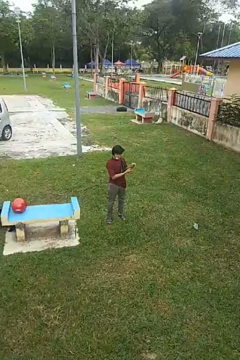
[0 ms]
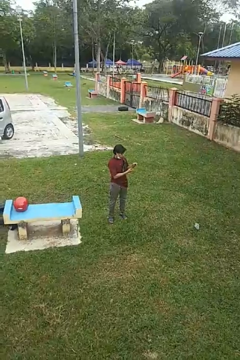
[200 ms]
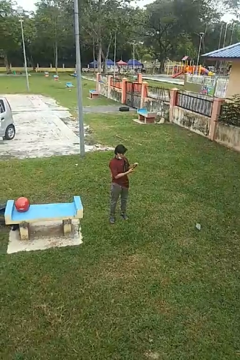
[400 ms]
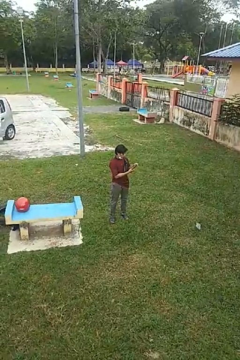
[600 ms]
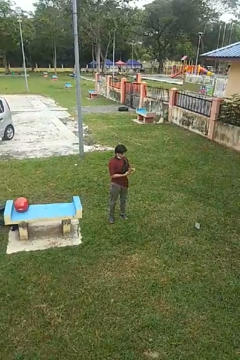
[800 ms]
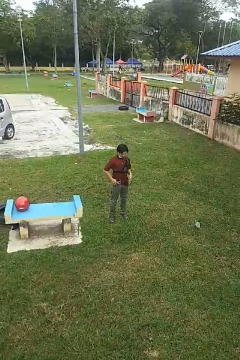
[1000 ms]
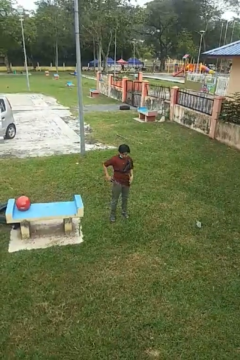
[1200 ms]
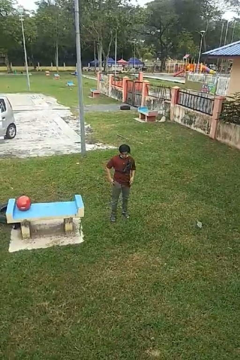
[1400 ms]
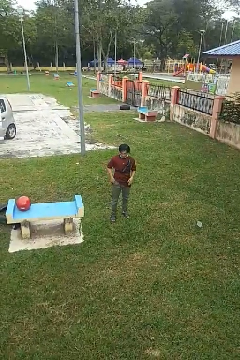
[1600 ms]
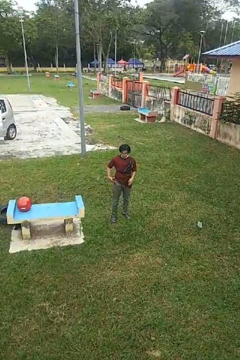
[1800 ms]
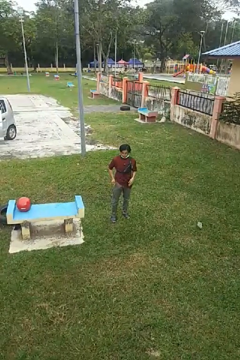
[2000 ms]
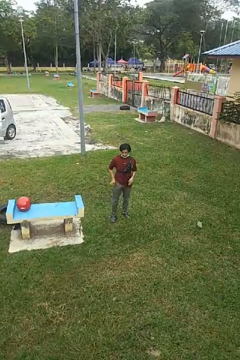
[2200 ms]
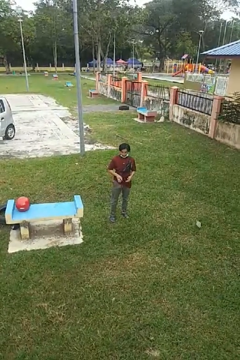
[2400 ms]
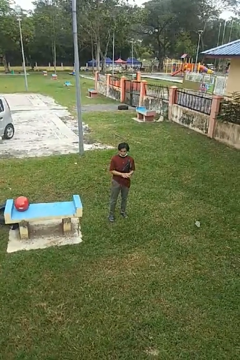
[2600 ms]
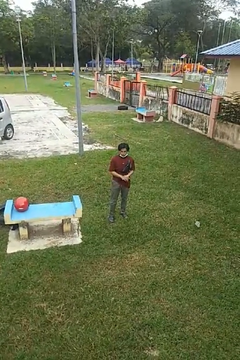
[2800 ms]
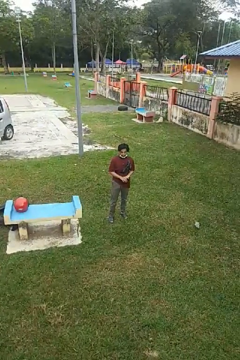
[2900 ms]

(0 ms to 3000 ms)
person puts phone into pocket

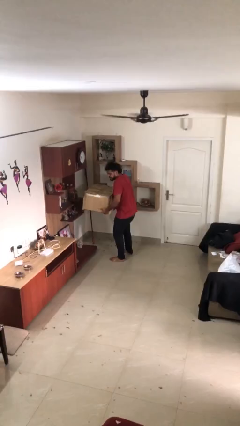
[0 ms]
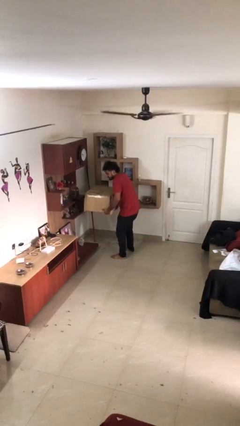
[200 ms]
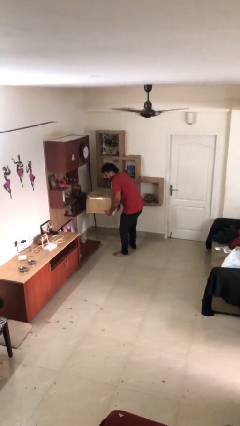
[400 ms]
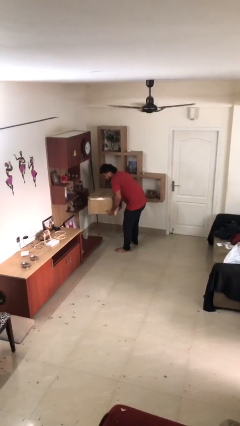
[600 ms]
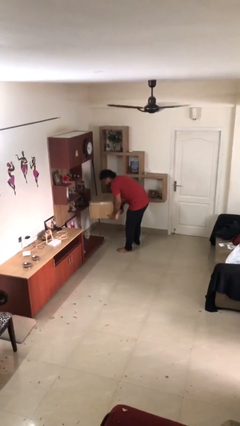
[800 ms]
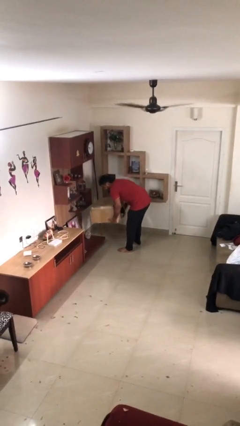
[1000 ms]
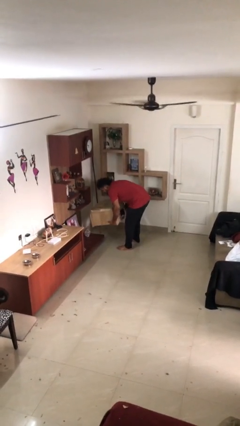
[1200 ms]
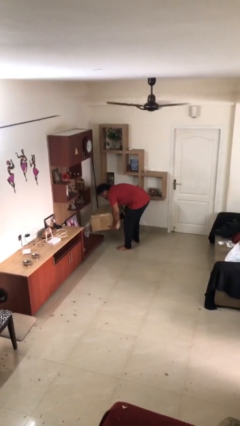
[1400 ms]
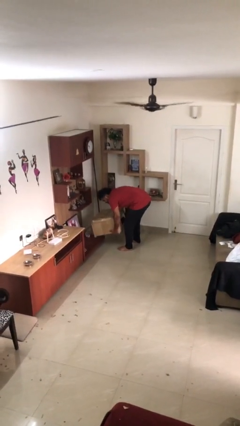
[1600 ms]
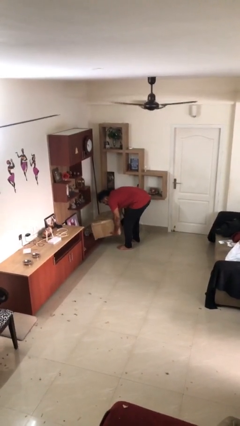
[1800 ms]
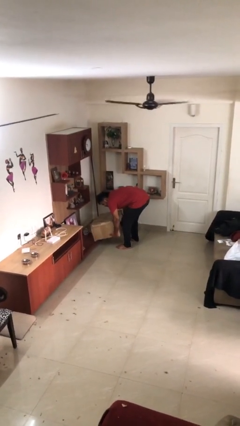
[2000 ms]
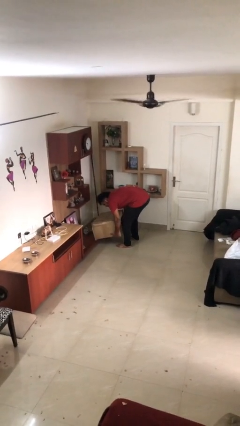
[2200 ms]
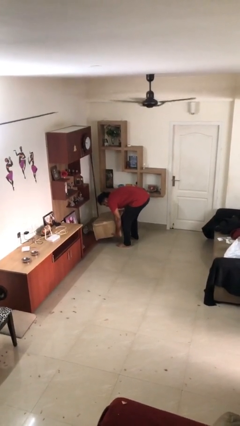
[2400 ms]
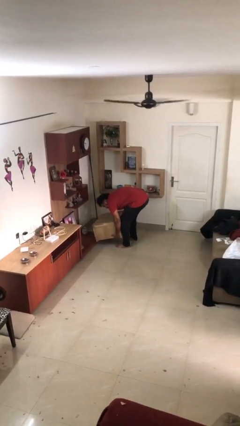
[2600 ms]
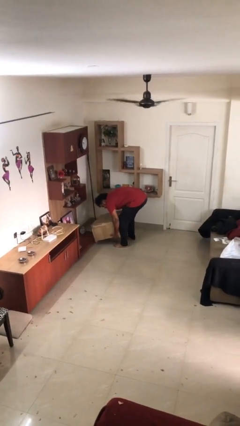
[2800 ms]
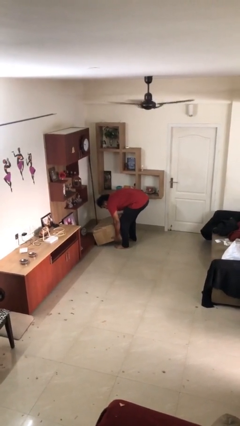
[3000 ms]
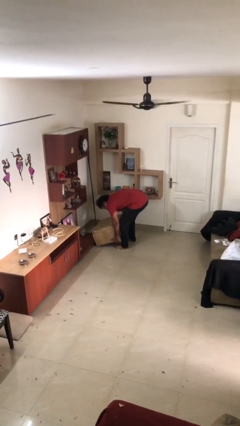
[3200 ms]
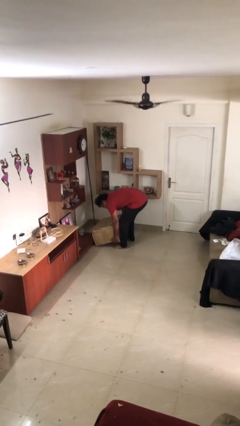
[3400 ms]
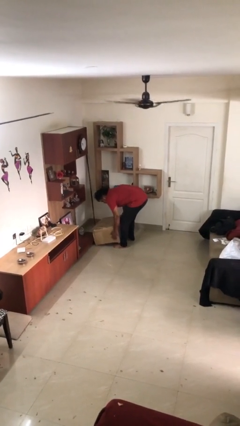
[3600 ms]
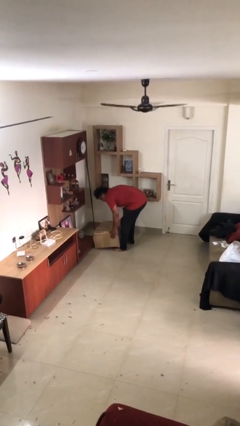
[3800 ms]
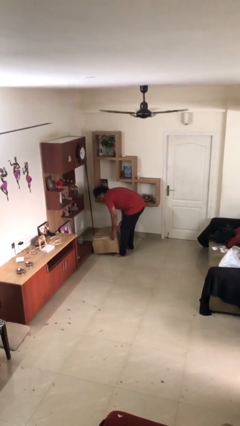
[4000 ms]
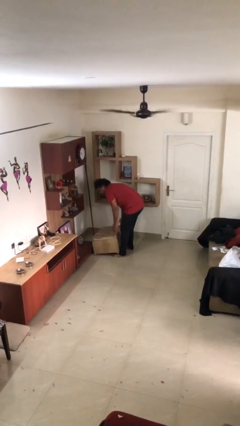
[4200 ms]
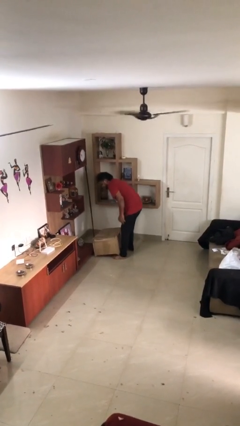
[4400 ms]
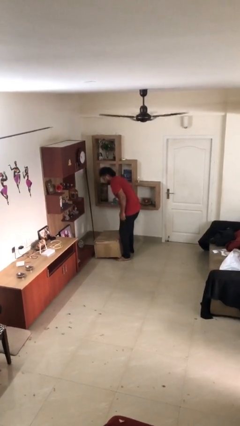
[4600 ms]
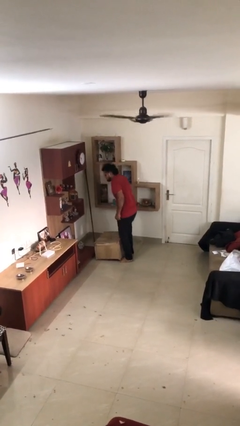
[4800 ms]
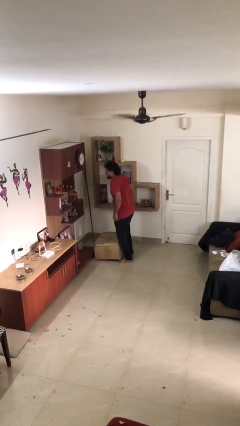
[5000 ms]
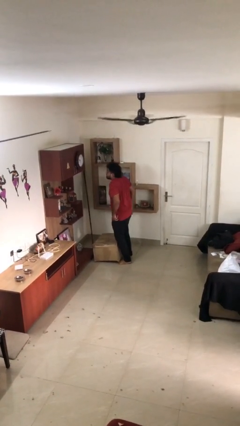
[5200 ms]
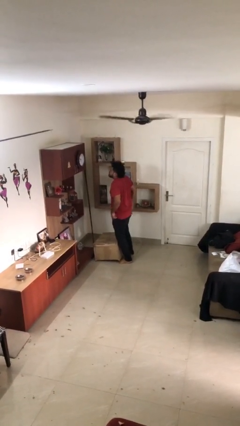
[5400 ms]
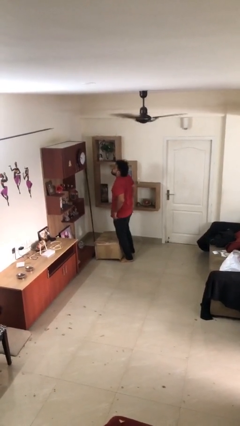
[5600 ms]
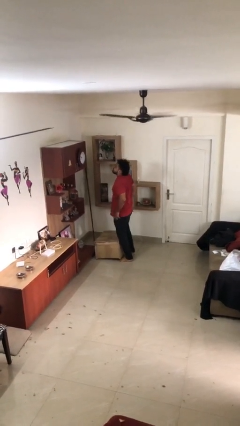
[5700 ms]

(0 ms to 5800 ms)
person puts down object on floor

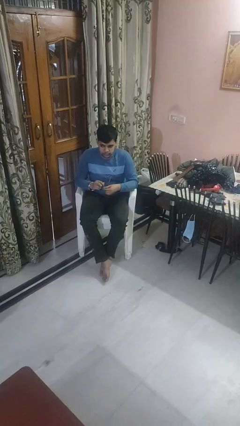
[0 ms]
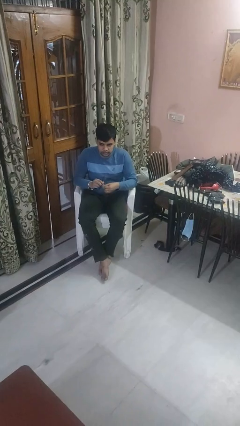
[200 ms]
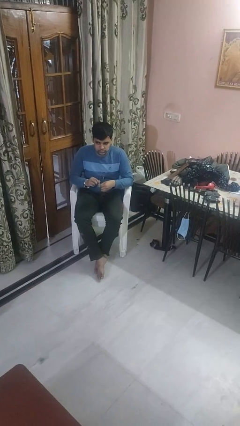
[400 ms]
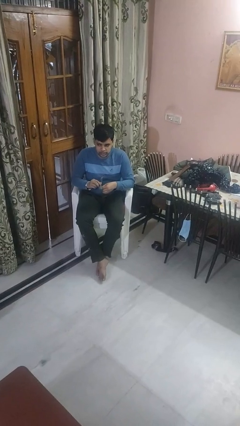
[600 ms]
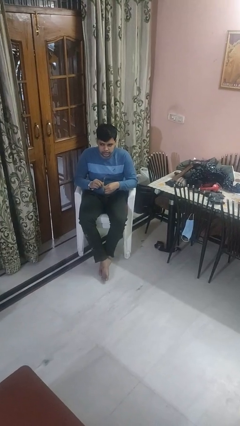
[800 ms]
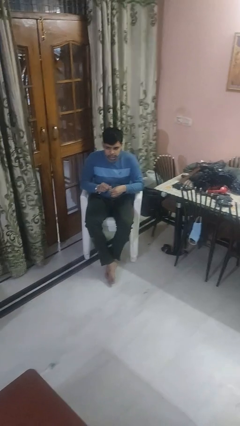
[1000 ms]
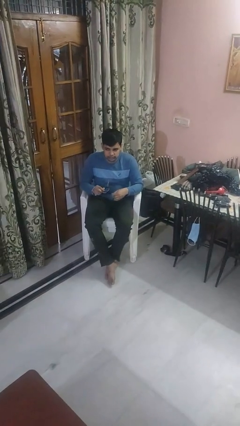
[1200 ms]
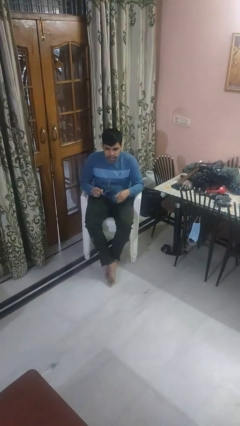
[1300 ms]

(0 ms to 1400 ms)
person cleans eyeglasses

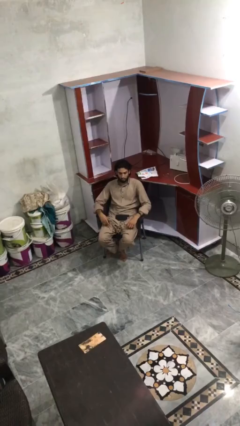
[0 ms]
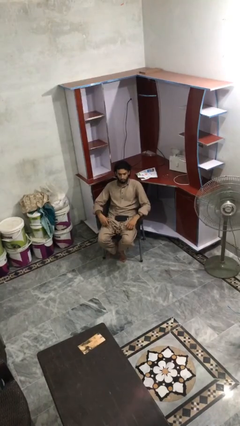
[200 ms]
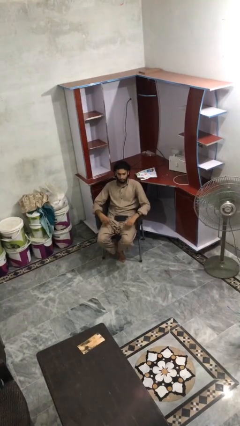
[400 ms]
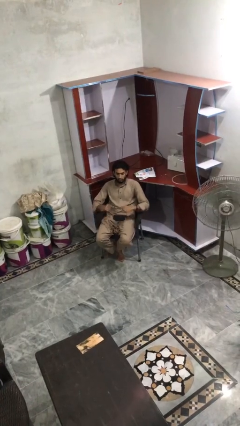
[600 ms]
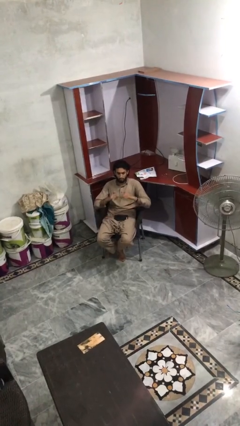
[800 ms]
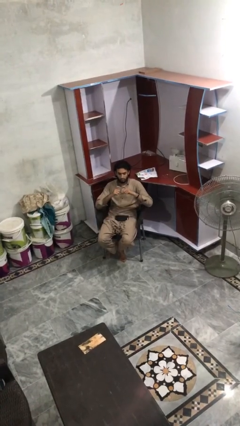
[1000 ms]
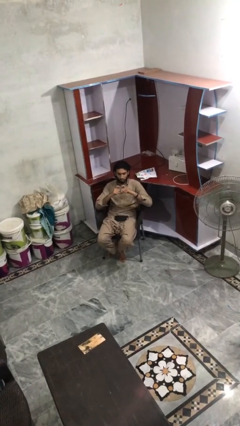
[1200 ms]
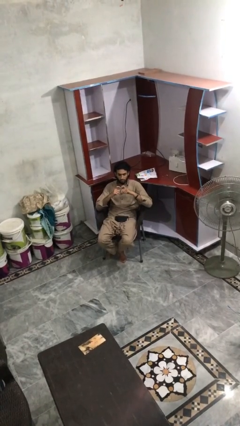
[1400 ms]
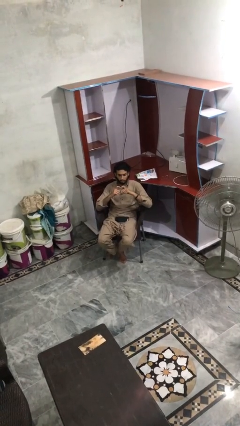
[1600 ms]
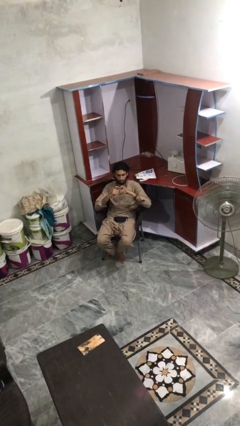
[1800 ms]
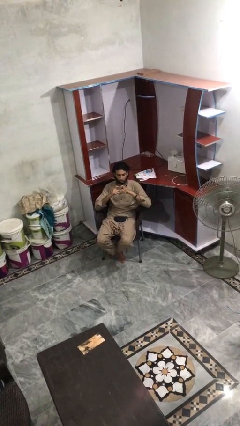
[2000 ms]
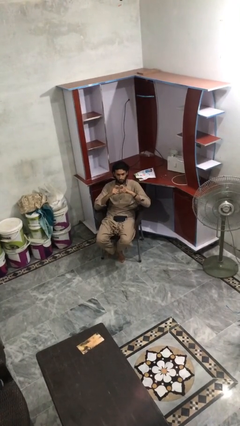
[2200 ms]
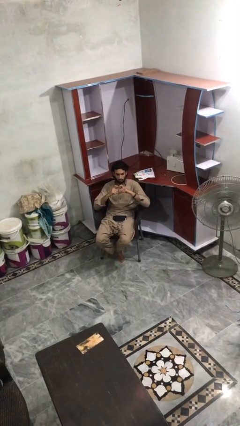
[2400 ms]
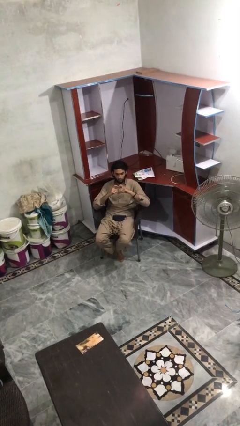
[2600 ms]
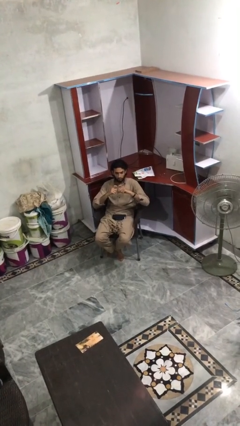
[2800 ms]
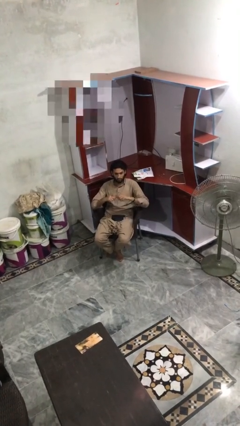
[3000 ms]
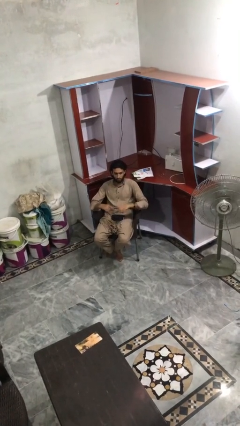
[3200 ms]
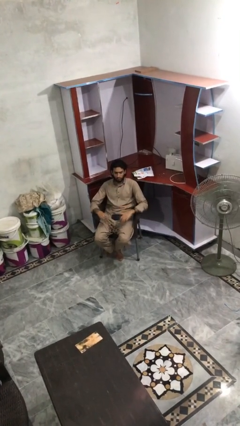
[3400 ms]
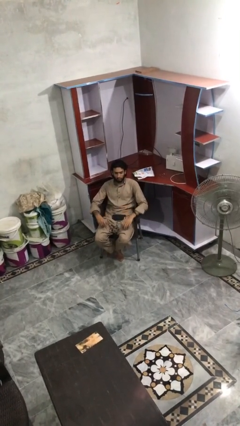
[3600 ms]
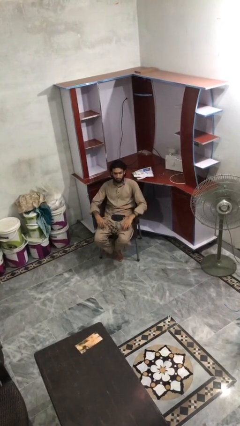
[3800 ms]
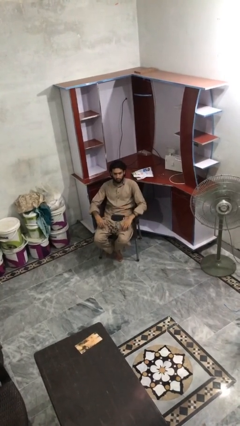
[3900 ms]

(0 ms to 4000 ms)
person gestures heart

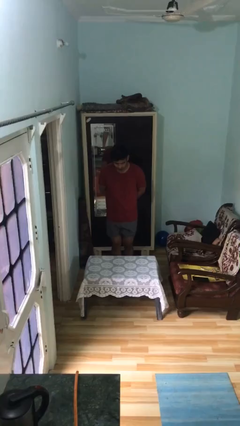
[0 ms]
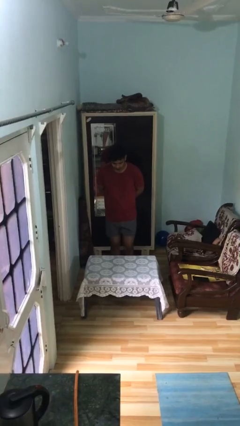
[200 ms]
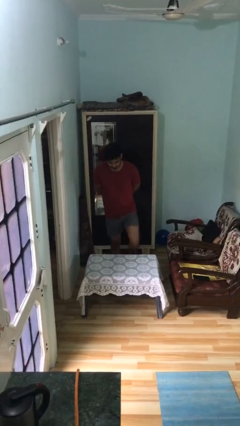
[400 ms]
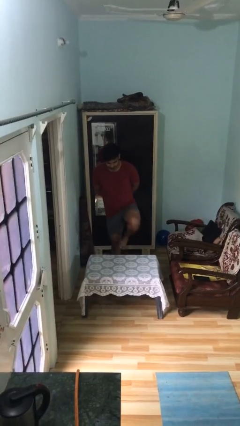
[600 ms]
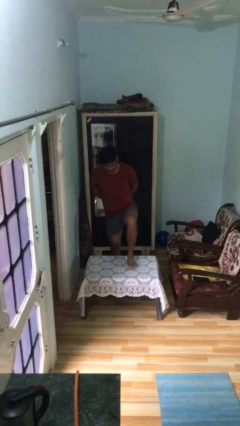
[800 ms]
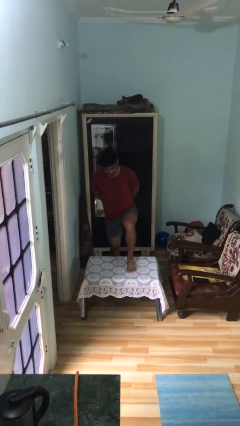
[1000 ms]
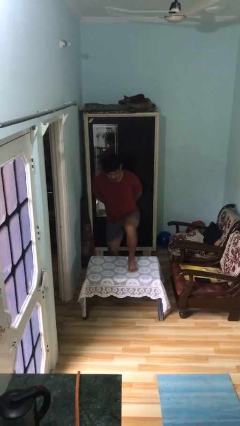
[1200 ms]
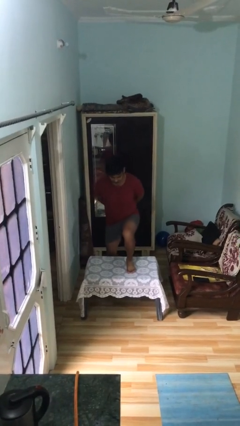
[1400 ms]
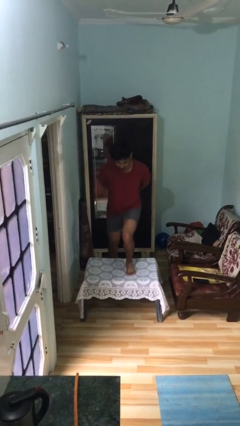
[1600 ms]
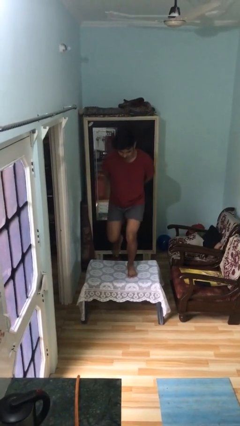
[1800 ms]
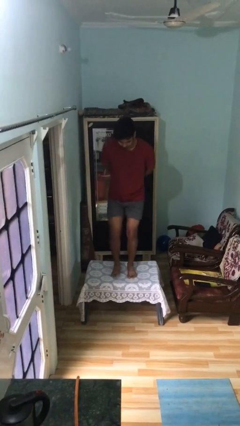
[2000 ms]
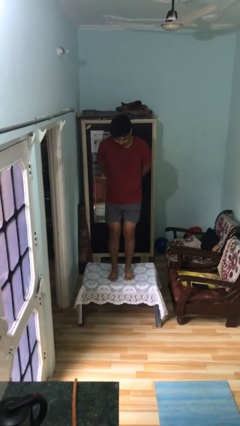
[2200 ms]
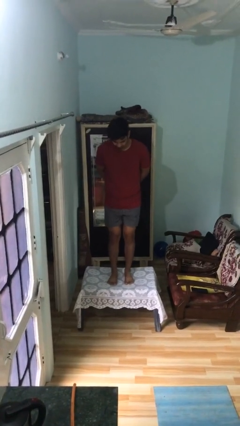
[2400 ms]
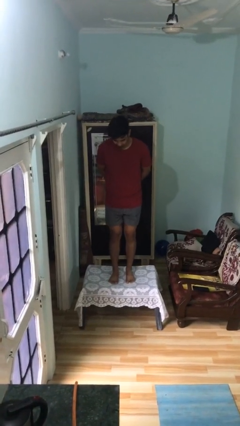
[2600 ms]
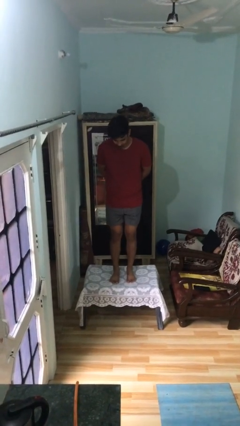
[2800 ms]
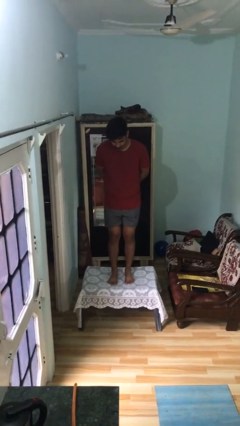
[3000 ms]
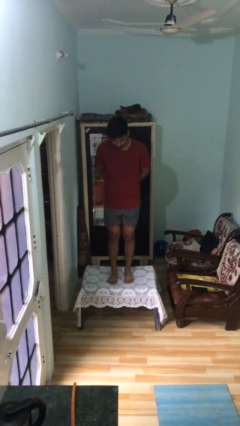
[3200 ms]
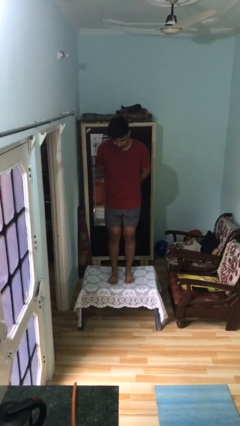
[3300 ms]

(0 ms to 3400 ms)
person climbs on table

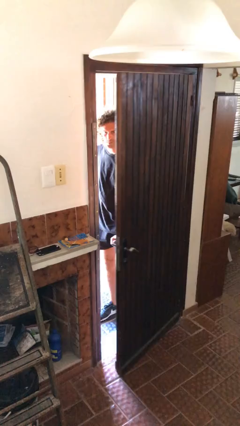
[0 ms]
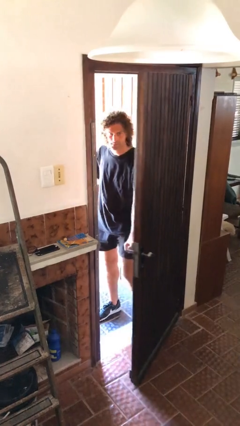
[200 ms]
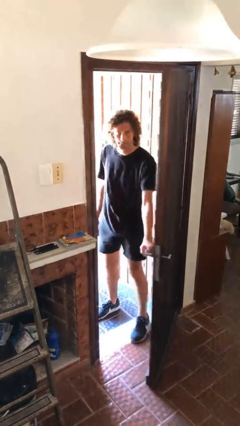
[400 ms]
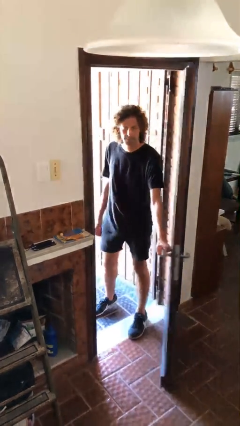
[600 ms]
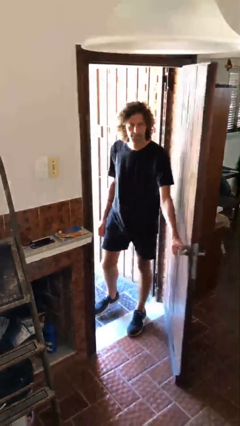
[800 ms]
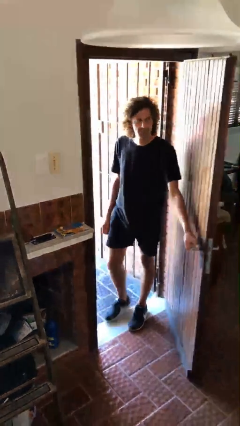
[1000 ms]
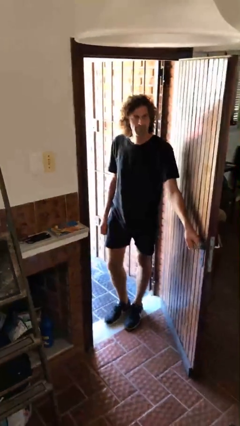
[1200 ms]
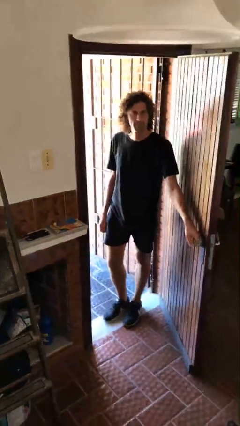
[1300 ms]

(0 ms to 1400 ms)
person opens facility door
